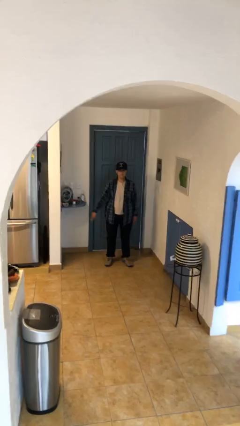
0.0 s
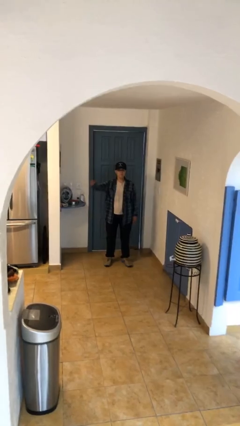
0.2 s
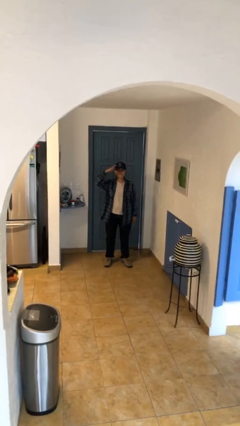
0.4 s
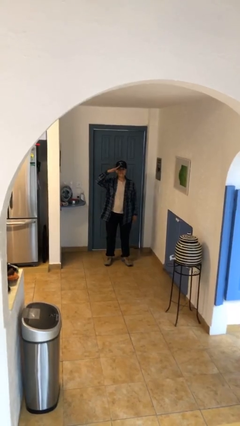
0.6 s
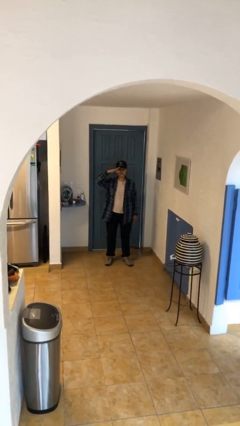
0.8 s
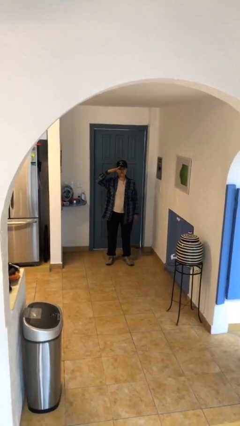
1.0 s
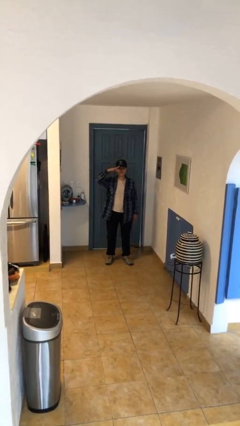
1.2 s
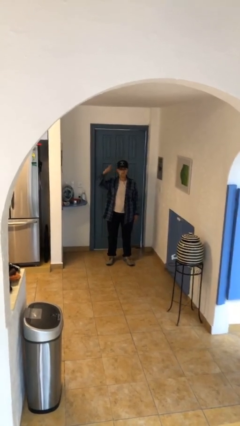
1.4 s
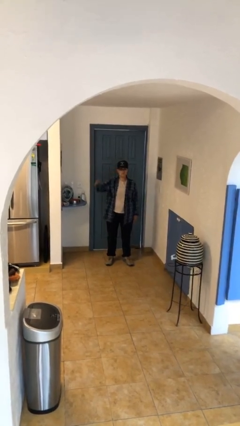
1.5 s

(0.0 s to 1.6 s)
person salutes

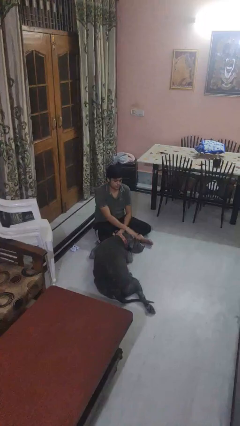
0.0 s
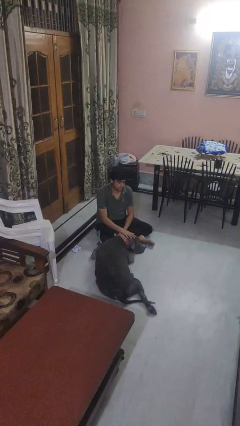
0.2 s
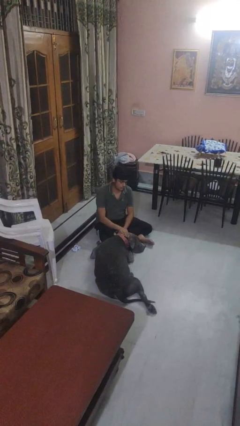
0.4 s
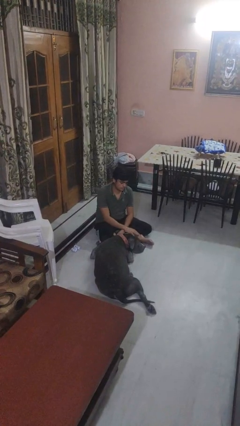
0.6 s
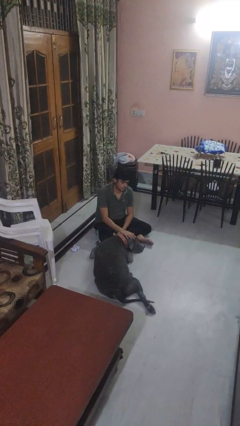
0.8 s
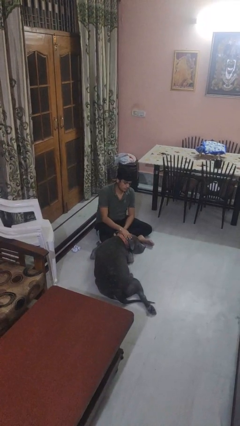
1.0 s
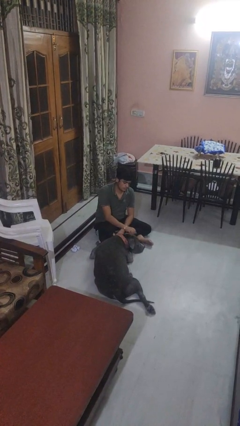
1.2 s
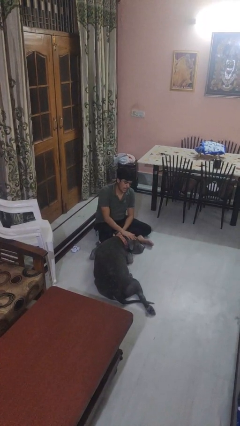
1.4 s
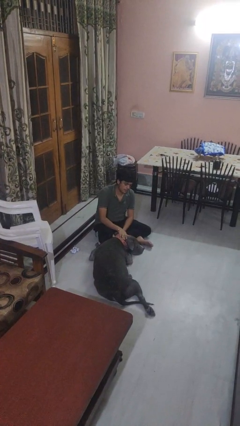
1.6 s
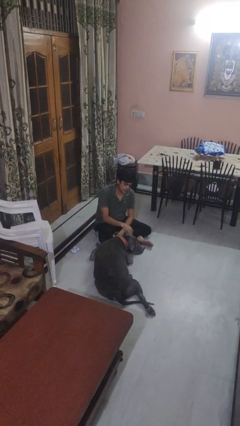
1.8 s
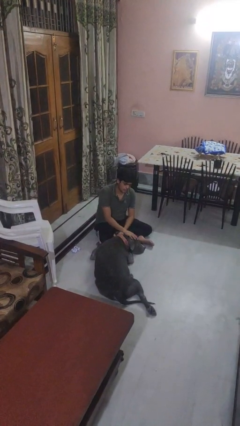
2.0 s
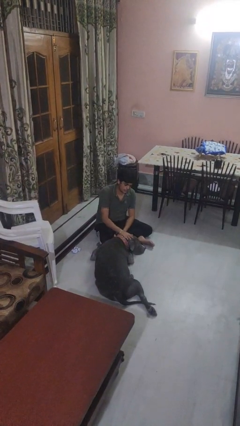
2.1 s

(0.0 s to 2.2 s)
person pets dog

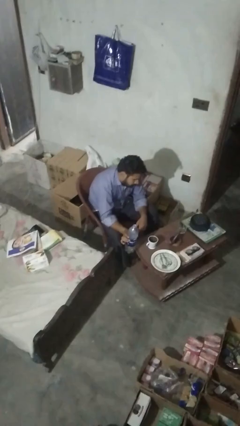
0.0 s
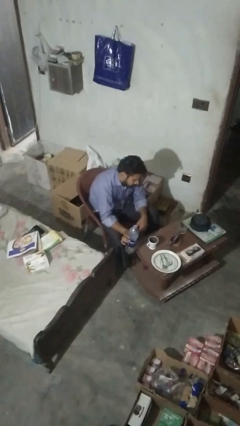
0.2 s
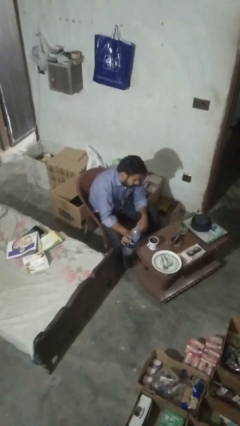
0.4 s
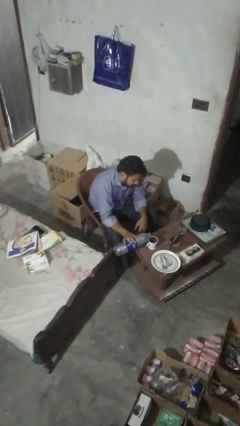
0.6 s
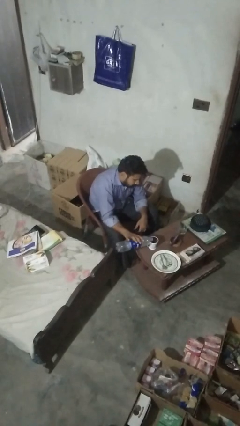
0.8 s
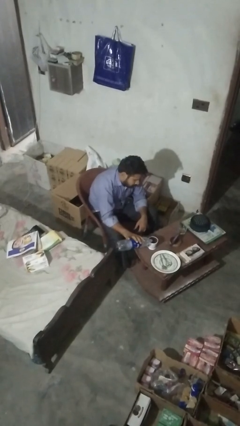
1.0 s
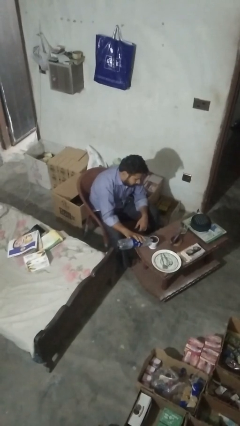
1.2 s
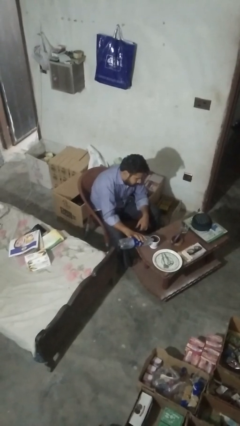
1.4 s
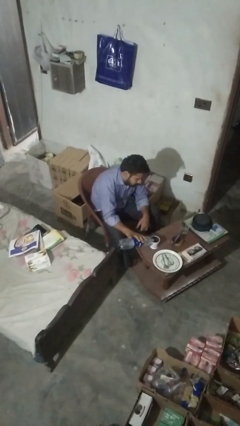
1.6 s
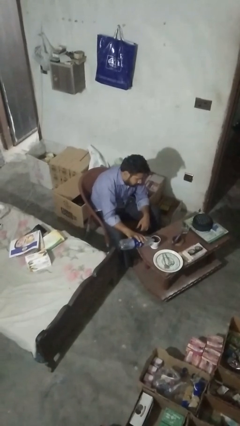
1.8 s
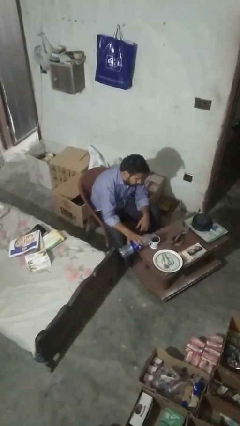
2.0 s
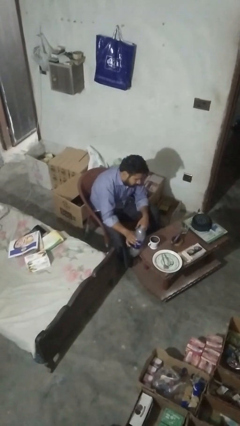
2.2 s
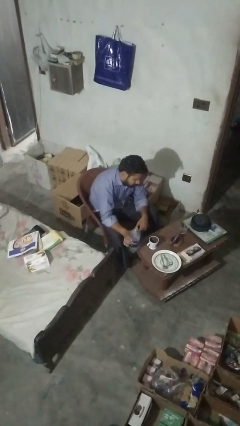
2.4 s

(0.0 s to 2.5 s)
person pours liquid into cup

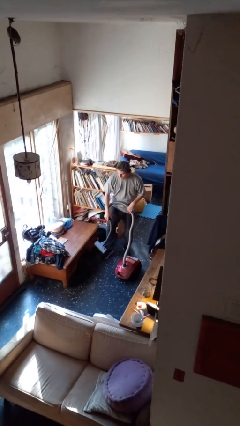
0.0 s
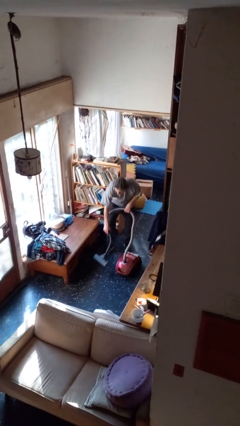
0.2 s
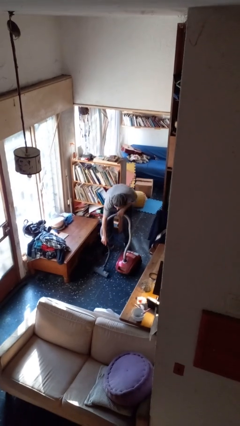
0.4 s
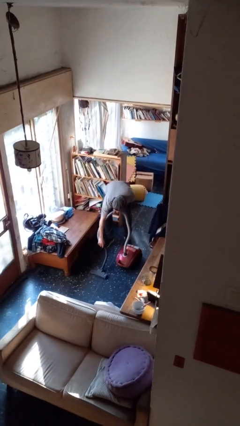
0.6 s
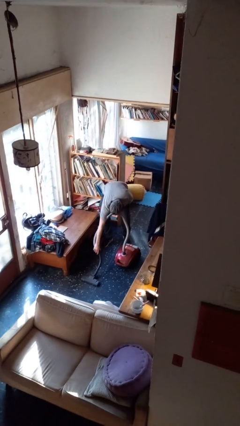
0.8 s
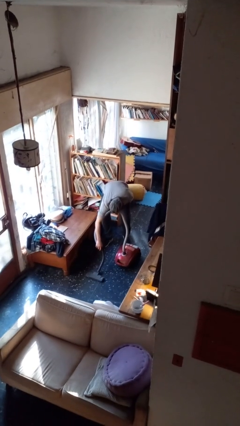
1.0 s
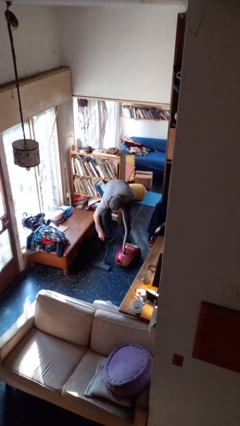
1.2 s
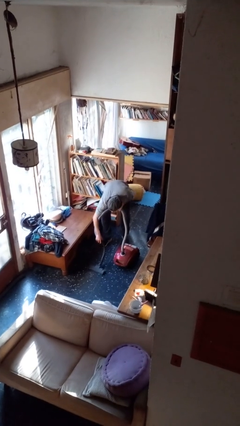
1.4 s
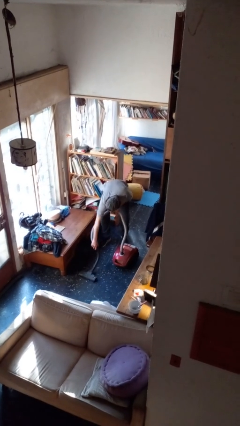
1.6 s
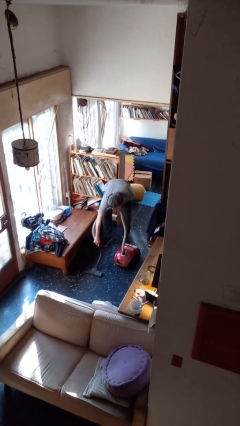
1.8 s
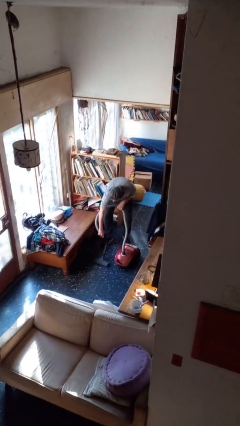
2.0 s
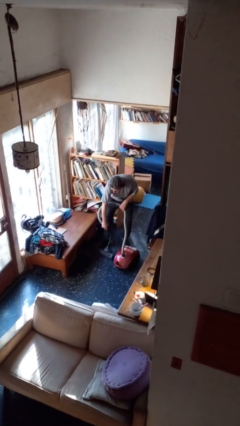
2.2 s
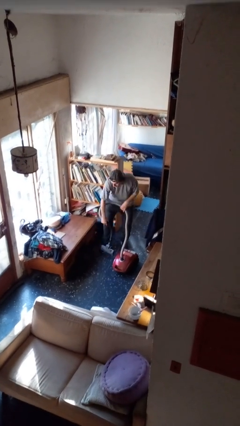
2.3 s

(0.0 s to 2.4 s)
person vacuums carpet

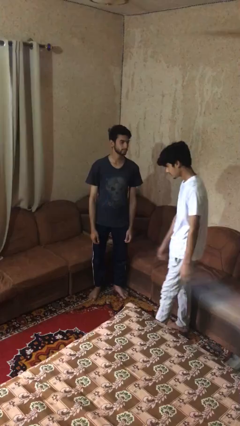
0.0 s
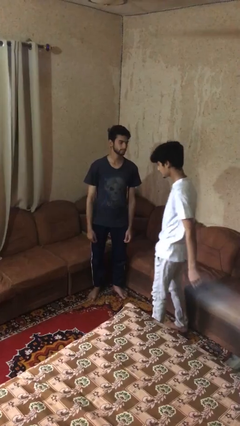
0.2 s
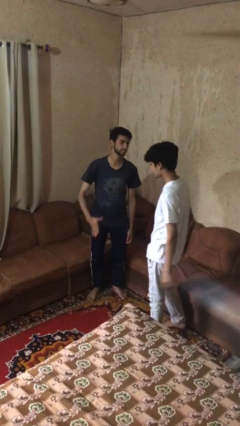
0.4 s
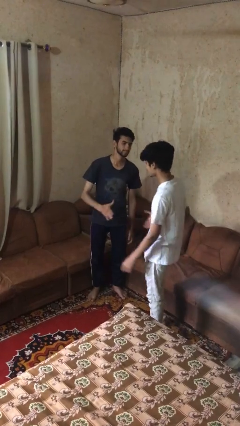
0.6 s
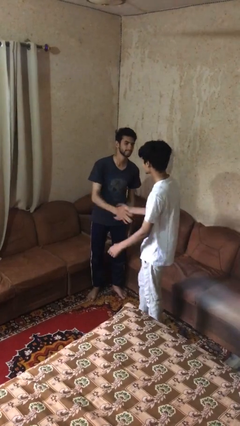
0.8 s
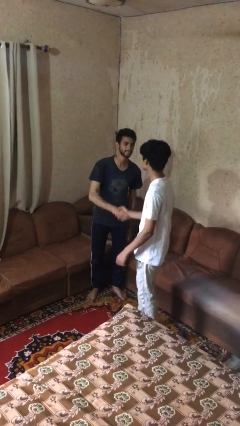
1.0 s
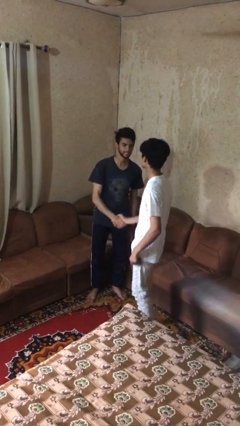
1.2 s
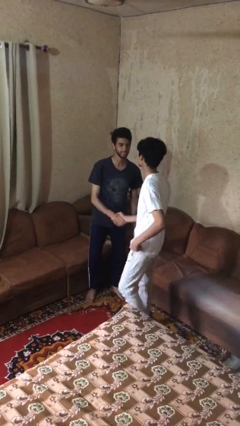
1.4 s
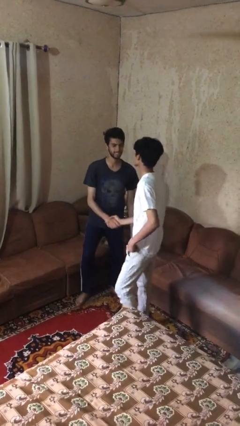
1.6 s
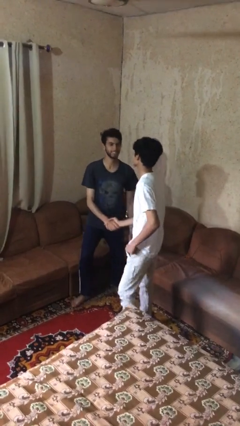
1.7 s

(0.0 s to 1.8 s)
person shakes hand

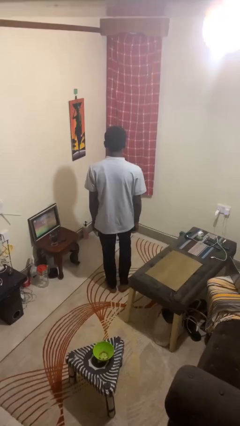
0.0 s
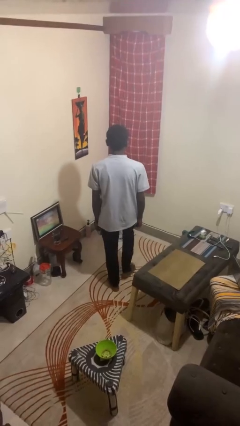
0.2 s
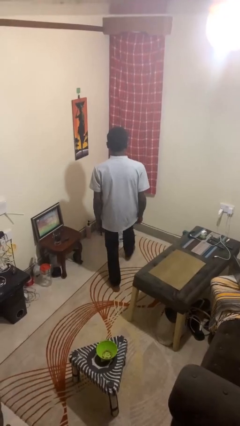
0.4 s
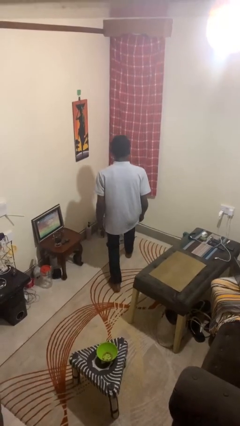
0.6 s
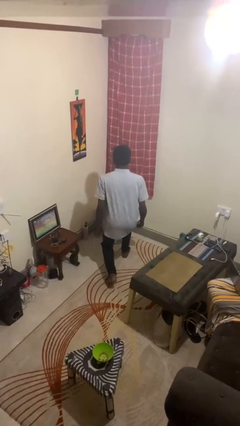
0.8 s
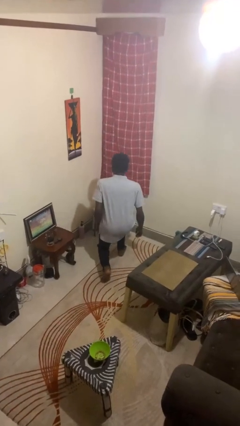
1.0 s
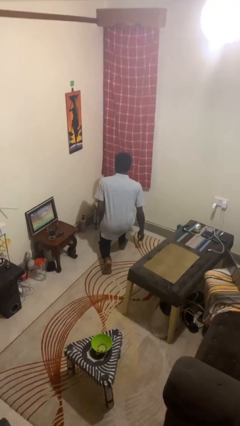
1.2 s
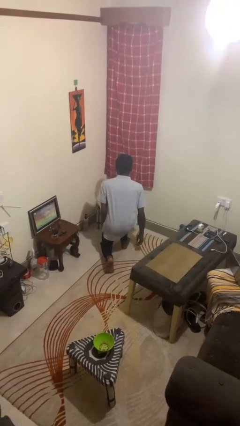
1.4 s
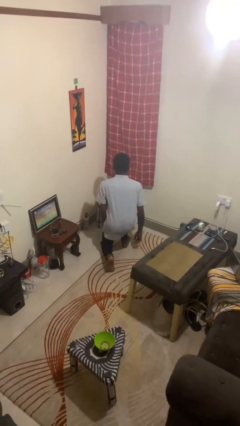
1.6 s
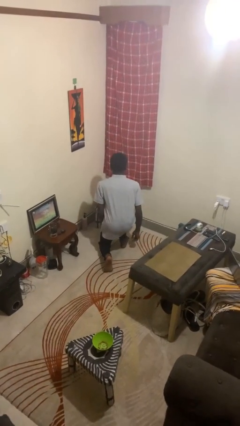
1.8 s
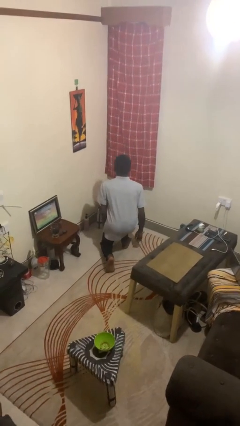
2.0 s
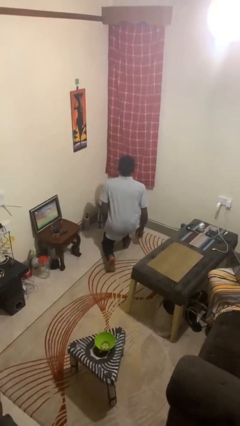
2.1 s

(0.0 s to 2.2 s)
person exercises with lunges

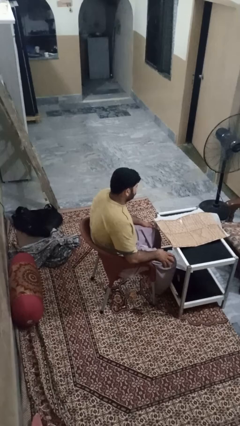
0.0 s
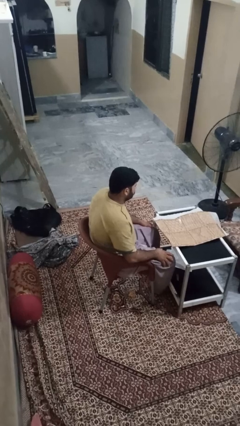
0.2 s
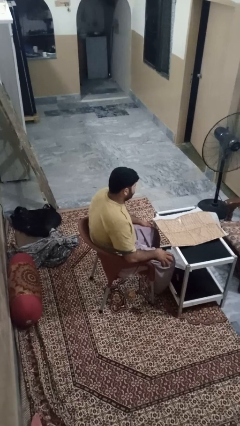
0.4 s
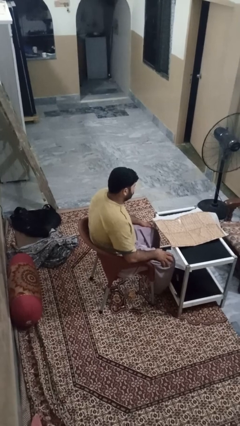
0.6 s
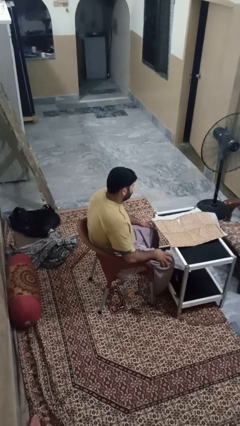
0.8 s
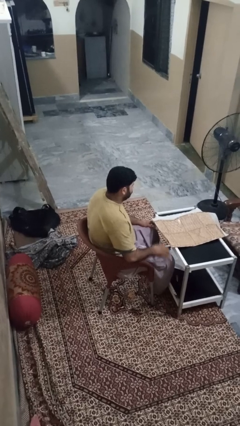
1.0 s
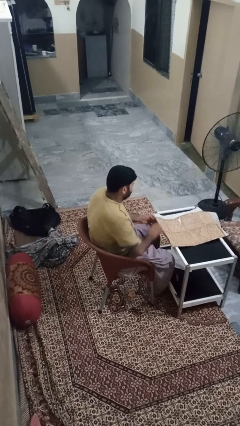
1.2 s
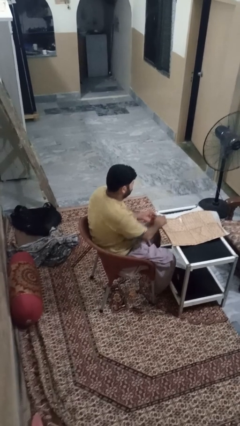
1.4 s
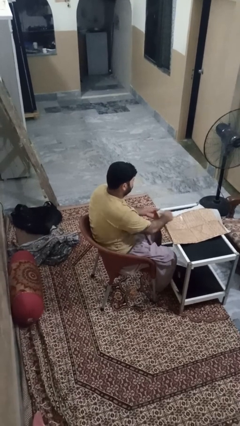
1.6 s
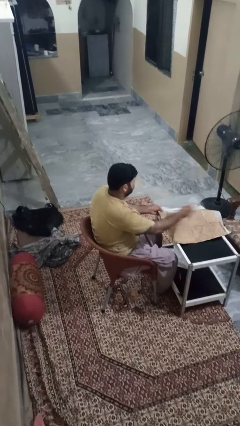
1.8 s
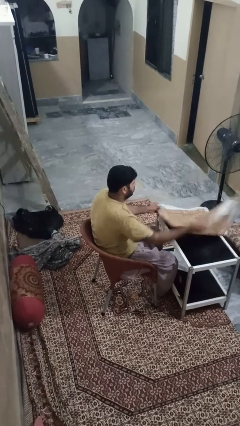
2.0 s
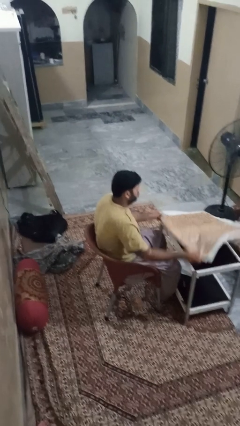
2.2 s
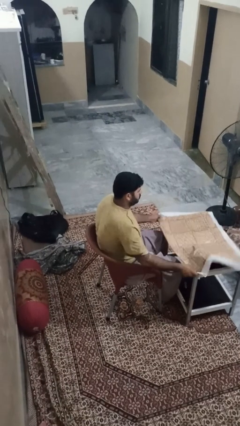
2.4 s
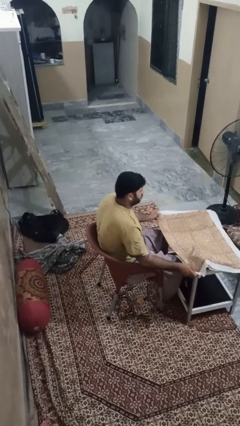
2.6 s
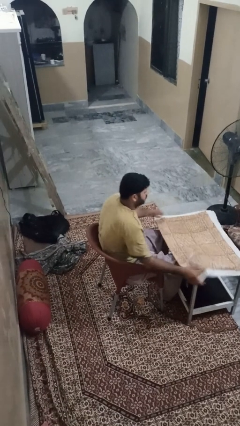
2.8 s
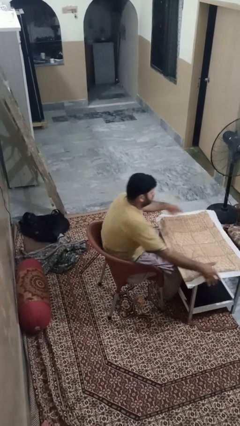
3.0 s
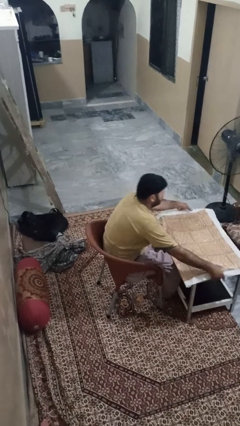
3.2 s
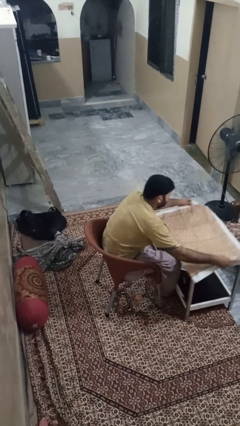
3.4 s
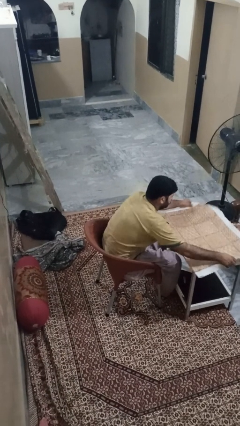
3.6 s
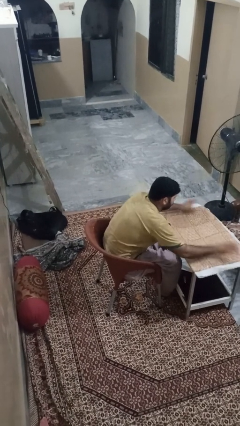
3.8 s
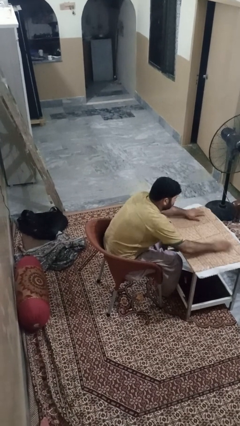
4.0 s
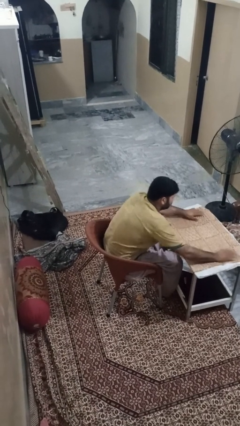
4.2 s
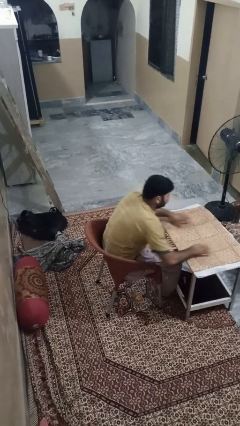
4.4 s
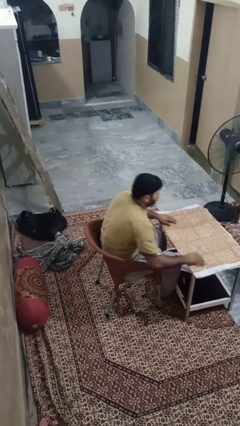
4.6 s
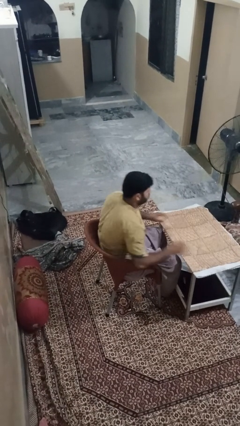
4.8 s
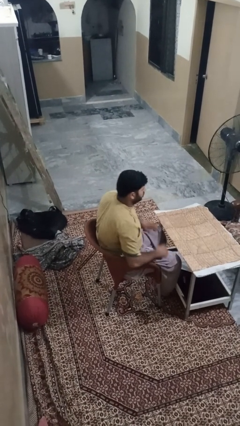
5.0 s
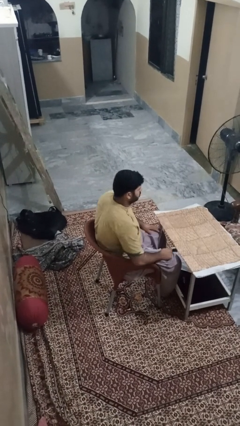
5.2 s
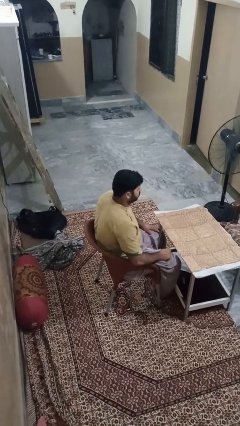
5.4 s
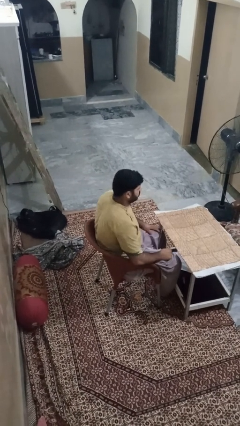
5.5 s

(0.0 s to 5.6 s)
person spreads tablecloth
